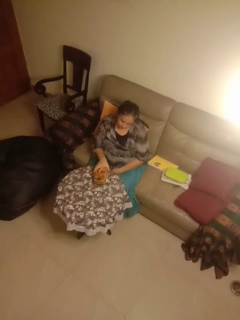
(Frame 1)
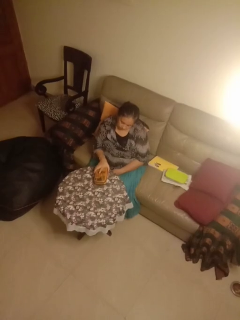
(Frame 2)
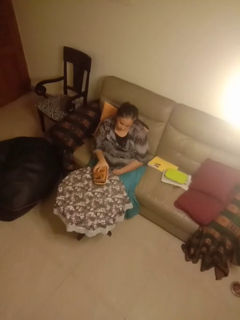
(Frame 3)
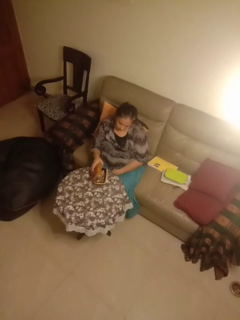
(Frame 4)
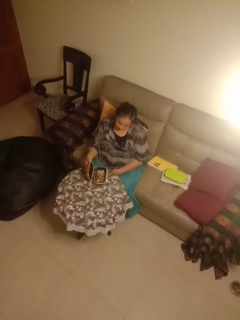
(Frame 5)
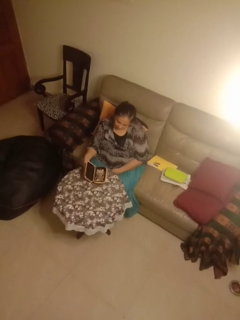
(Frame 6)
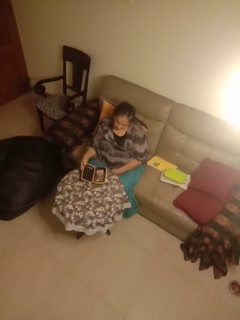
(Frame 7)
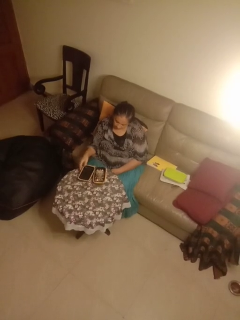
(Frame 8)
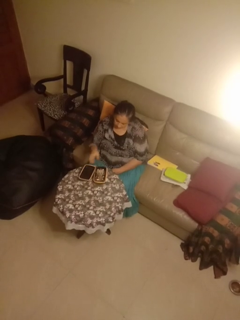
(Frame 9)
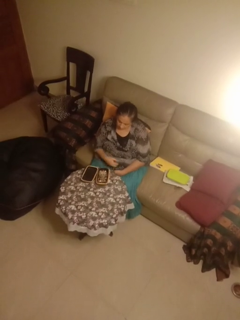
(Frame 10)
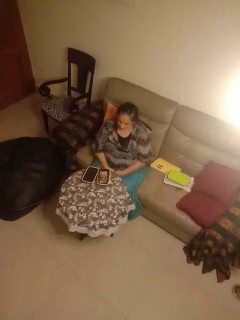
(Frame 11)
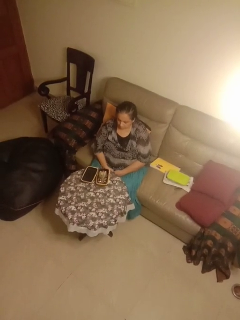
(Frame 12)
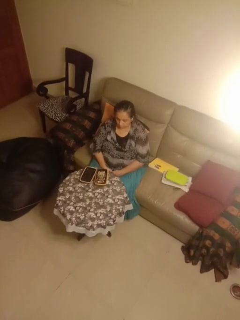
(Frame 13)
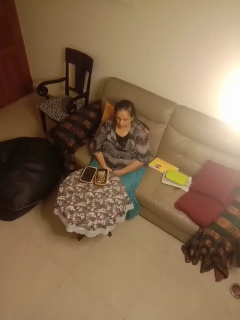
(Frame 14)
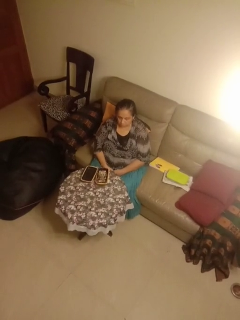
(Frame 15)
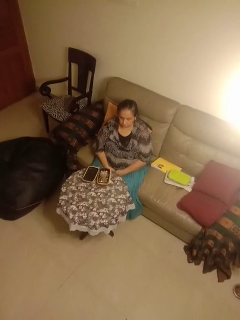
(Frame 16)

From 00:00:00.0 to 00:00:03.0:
person opens jewelry box

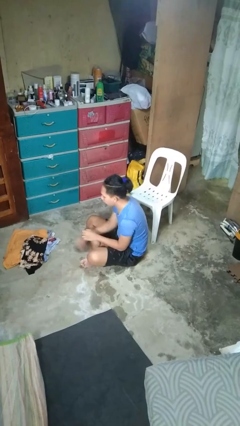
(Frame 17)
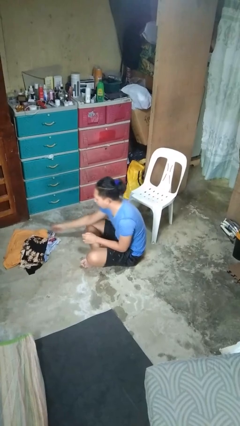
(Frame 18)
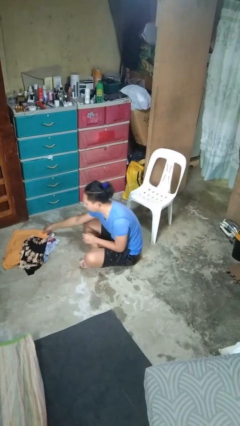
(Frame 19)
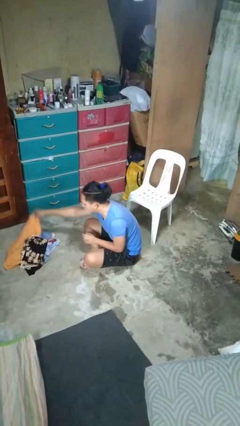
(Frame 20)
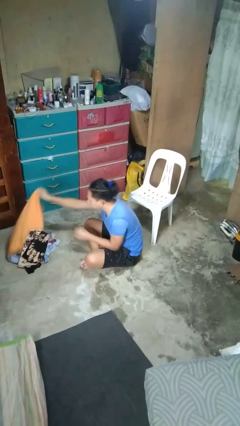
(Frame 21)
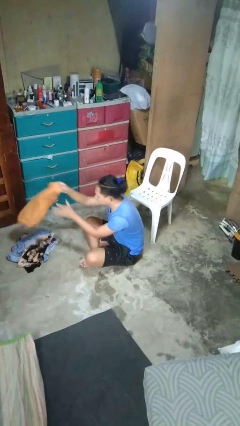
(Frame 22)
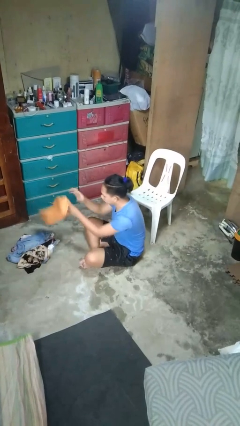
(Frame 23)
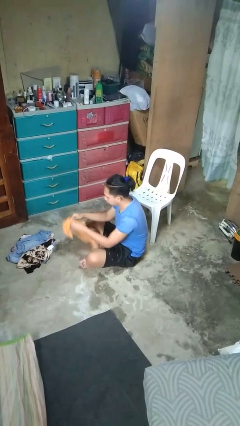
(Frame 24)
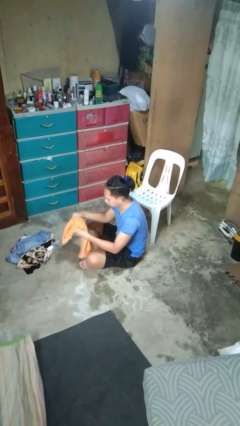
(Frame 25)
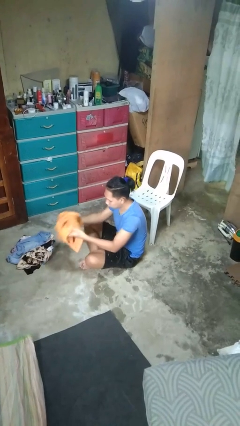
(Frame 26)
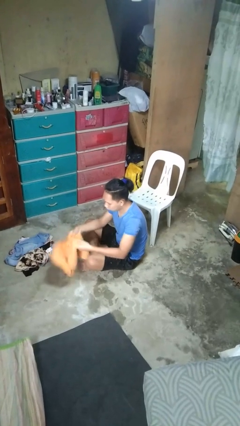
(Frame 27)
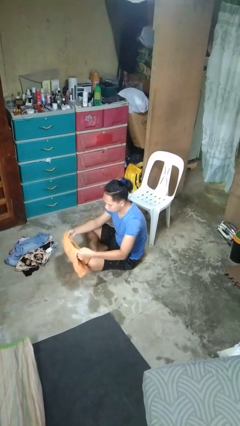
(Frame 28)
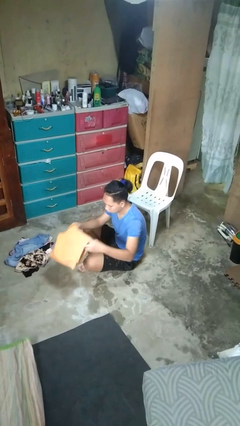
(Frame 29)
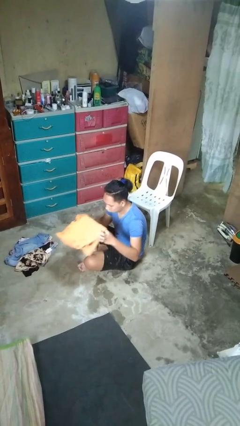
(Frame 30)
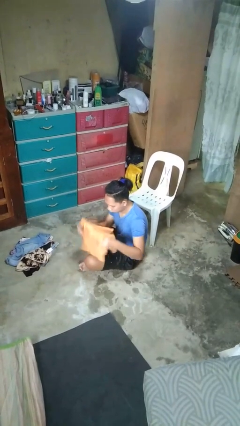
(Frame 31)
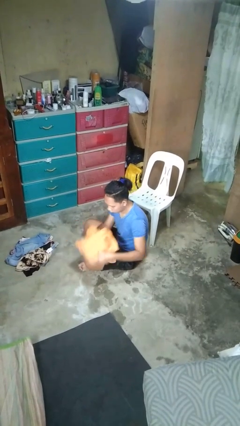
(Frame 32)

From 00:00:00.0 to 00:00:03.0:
person folds shirt

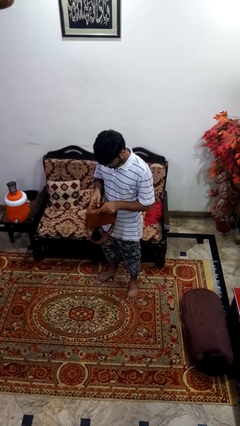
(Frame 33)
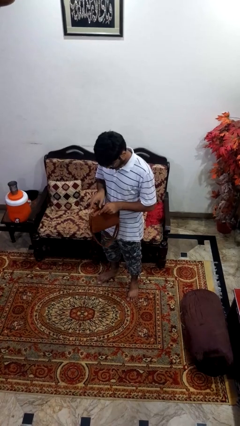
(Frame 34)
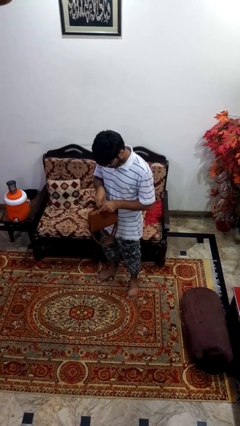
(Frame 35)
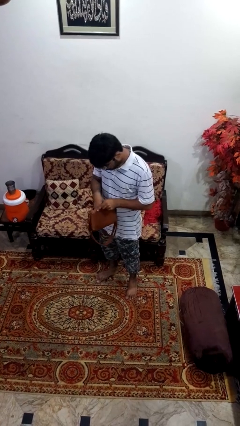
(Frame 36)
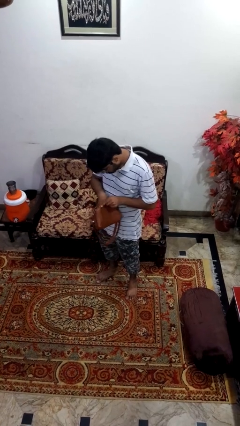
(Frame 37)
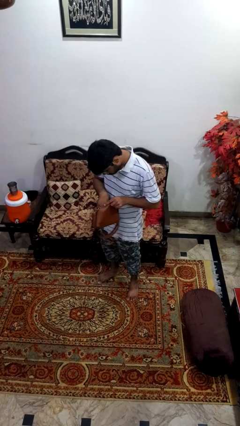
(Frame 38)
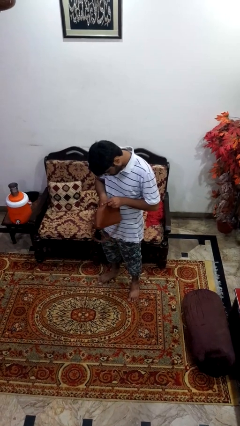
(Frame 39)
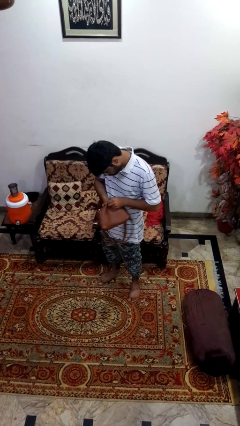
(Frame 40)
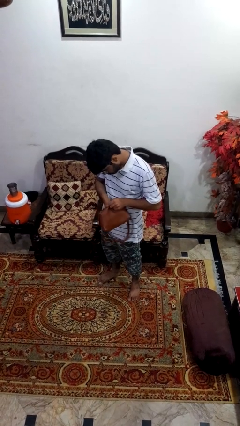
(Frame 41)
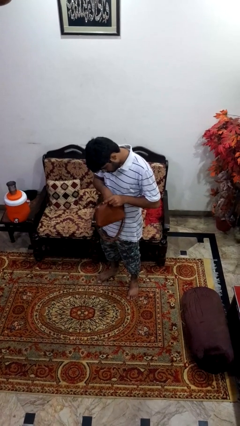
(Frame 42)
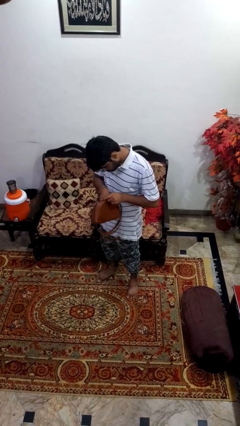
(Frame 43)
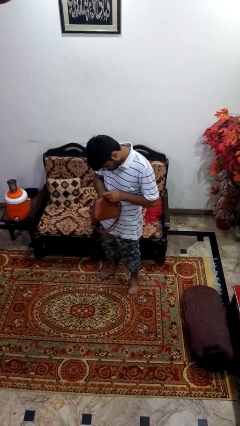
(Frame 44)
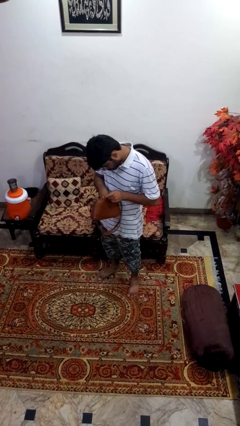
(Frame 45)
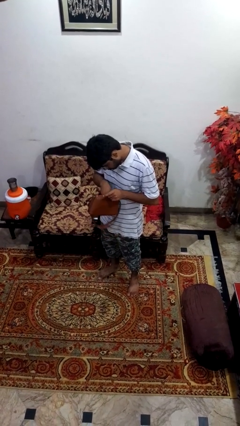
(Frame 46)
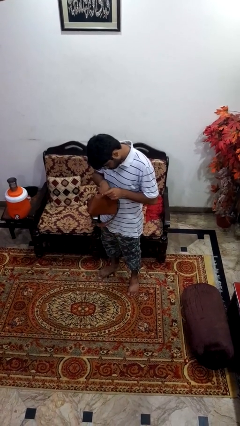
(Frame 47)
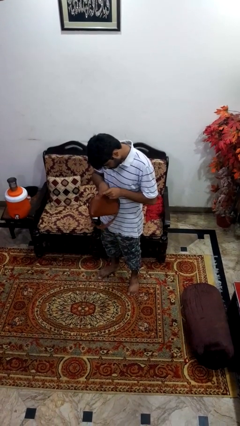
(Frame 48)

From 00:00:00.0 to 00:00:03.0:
person searches in purse

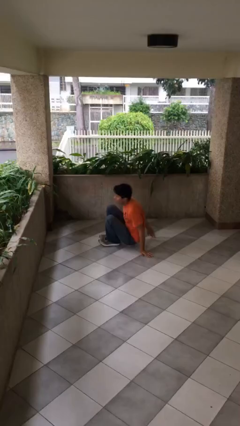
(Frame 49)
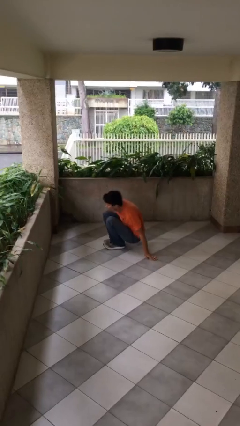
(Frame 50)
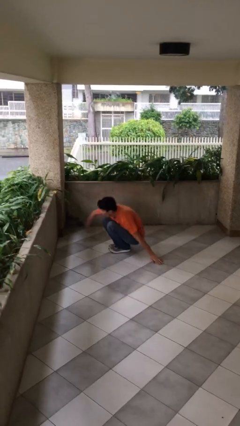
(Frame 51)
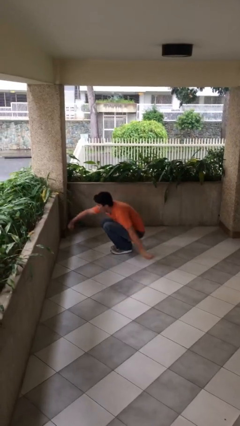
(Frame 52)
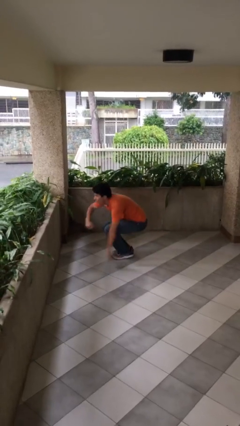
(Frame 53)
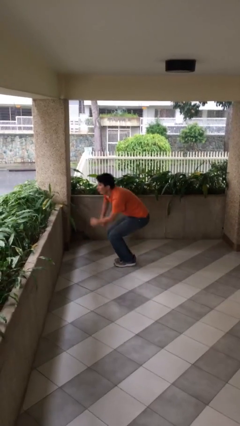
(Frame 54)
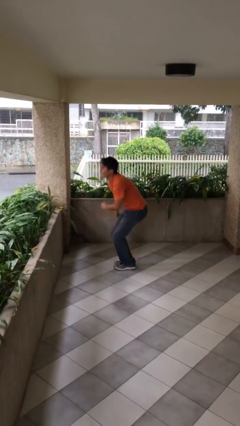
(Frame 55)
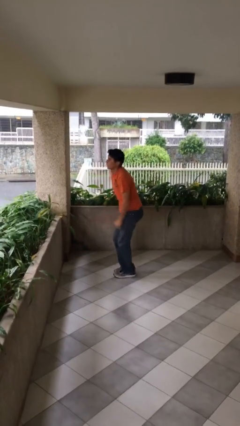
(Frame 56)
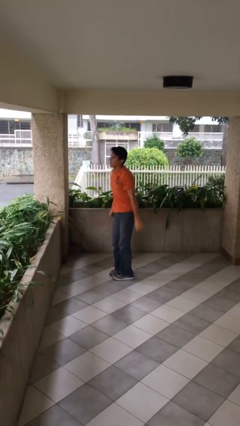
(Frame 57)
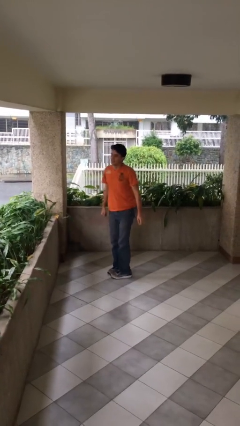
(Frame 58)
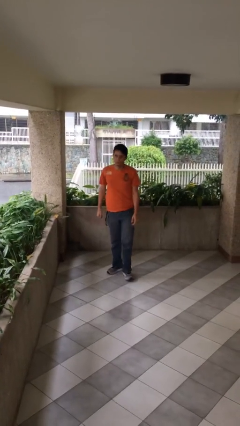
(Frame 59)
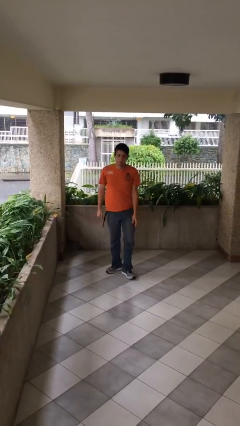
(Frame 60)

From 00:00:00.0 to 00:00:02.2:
person stands up

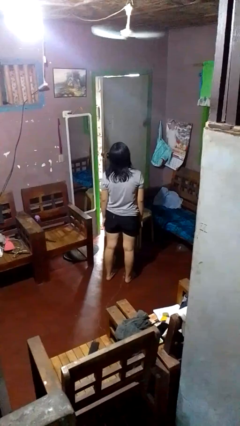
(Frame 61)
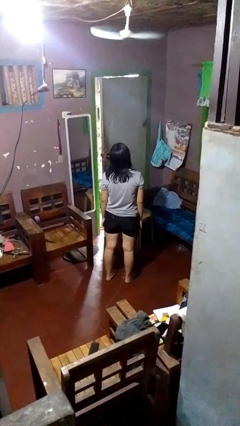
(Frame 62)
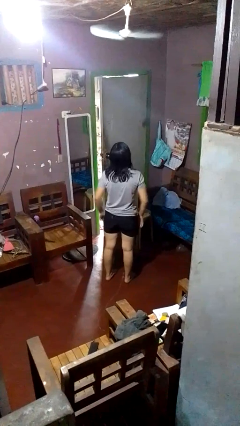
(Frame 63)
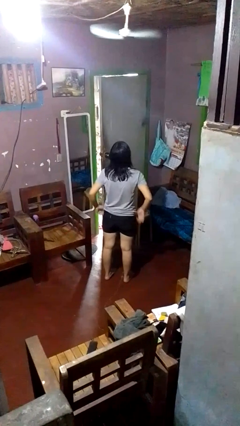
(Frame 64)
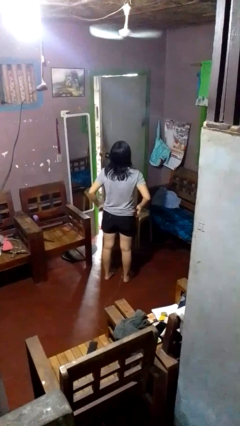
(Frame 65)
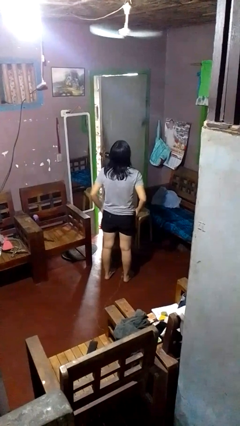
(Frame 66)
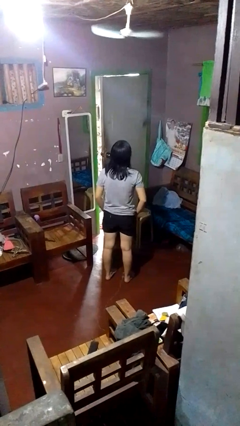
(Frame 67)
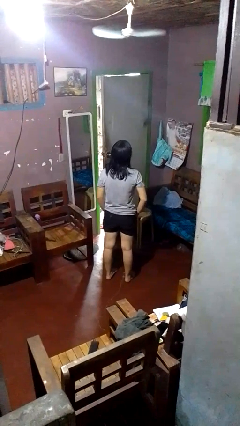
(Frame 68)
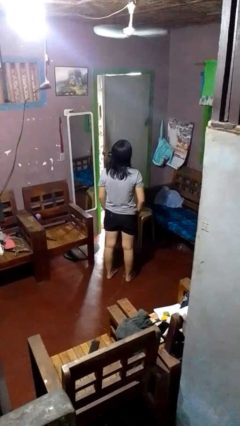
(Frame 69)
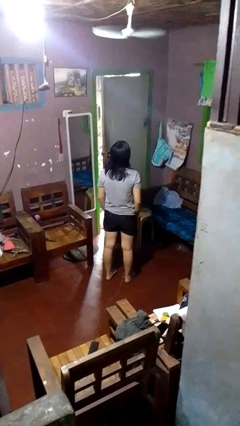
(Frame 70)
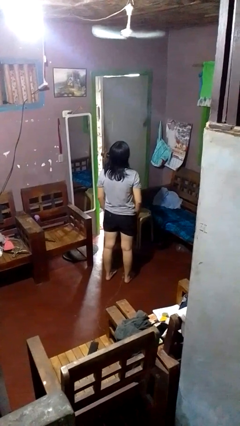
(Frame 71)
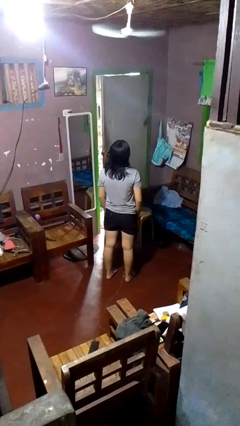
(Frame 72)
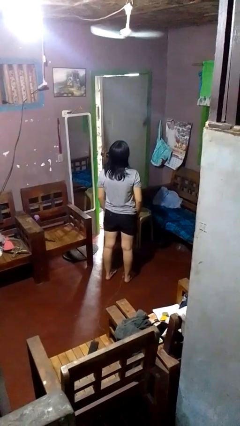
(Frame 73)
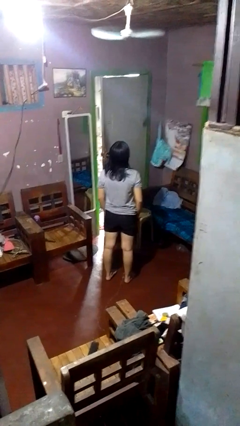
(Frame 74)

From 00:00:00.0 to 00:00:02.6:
person puts hands in back pockets

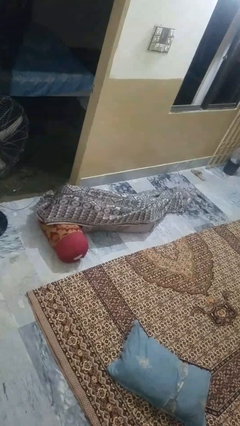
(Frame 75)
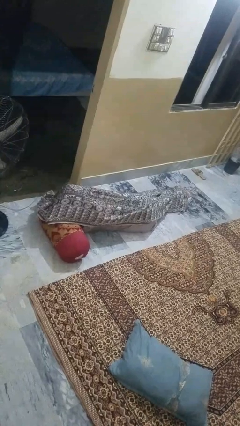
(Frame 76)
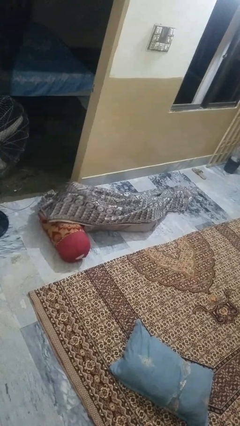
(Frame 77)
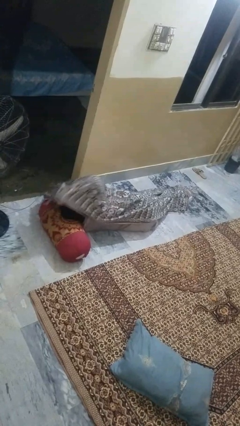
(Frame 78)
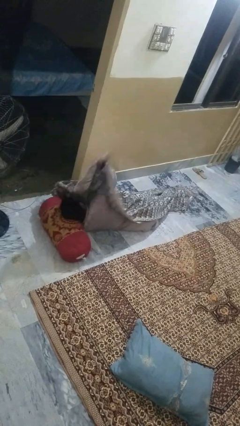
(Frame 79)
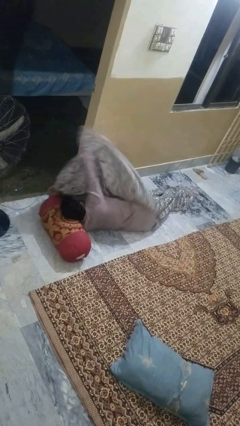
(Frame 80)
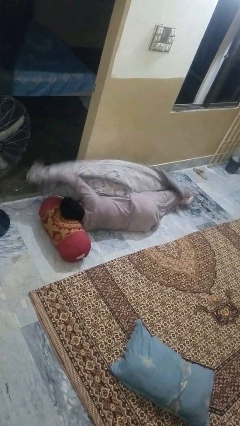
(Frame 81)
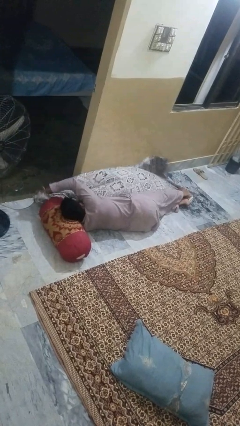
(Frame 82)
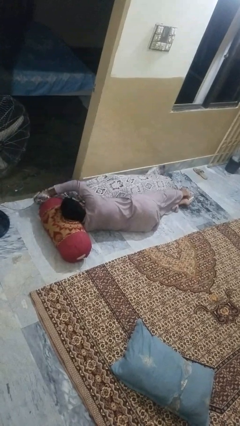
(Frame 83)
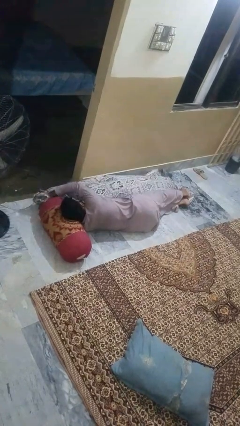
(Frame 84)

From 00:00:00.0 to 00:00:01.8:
person uncovers with blanket

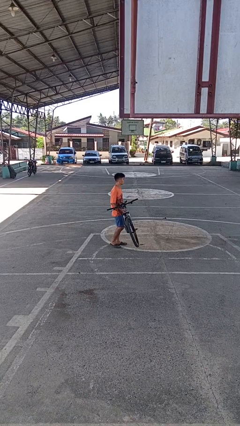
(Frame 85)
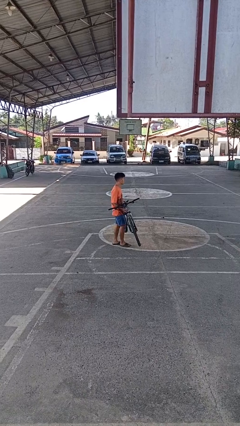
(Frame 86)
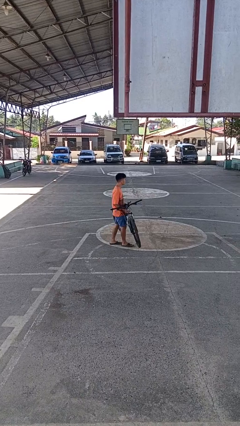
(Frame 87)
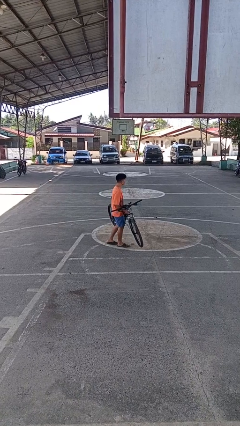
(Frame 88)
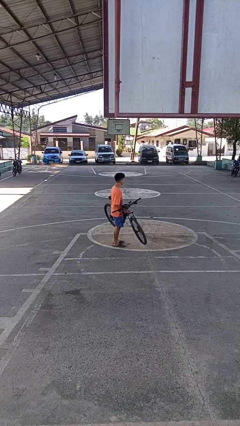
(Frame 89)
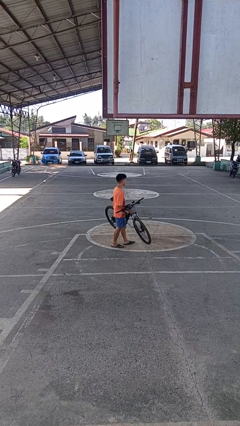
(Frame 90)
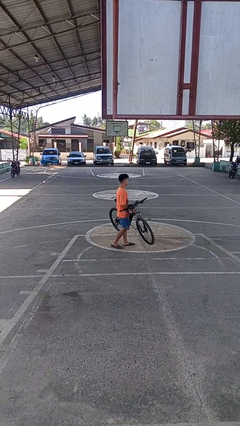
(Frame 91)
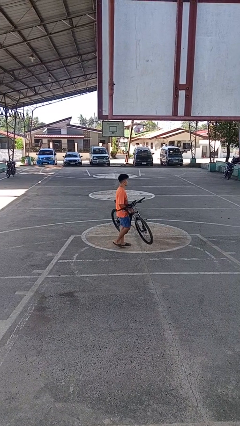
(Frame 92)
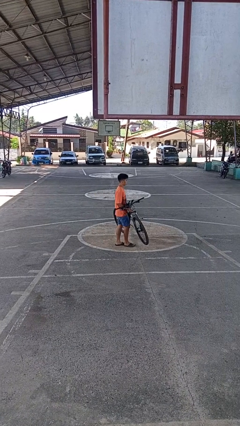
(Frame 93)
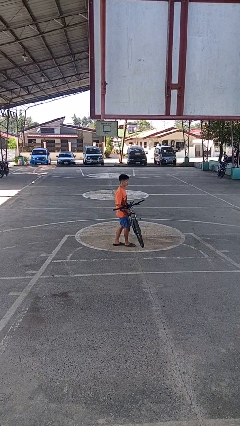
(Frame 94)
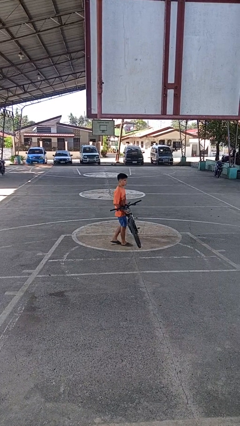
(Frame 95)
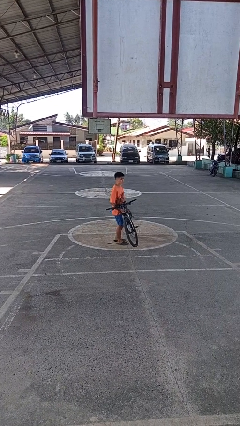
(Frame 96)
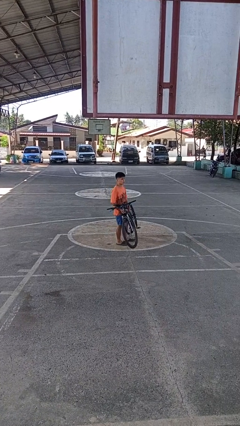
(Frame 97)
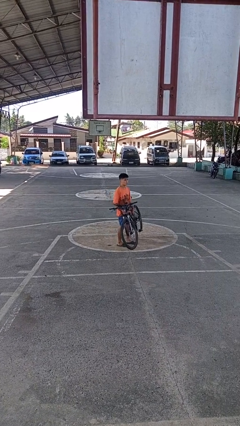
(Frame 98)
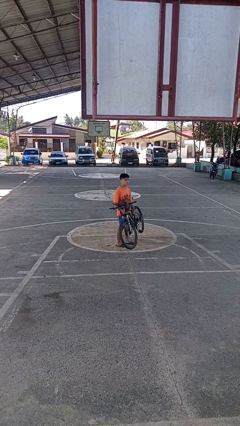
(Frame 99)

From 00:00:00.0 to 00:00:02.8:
person carries bicycle
